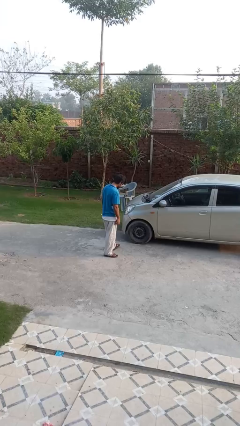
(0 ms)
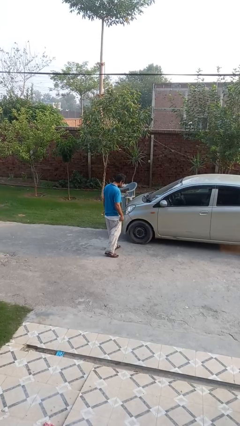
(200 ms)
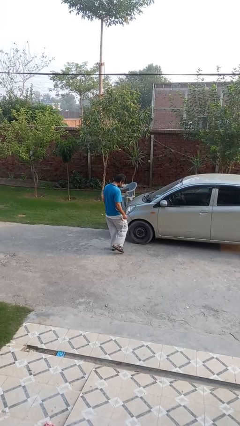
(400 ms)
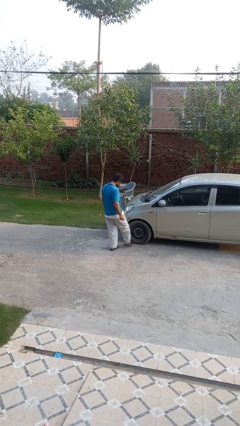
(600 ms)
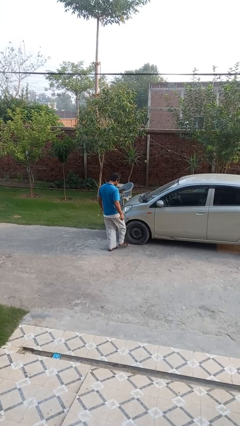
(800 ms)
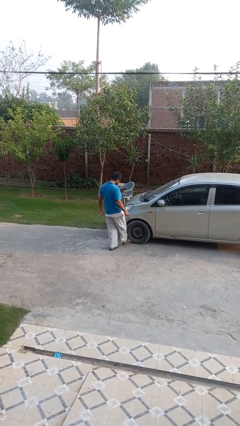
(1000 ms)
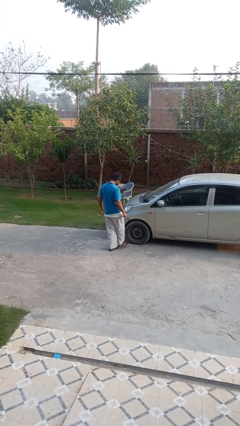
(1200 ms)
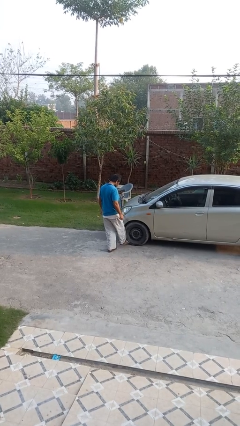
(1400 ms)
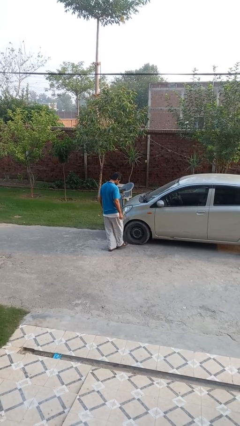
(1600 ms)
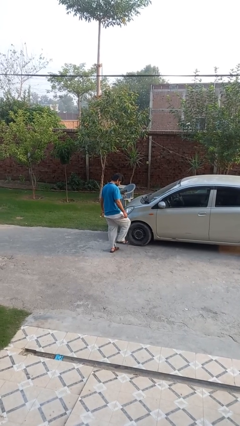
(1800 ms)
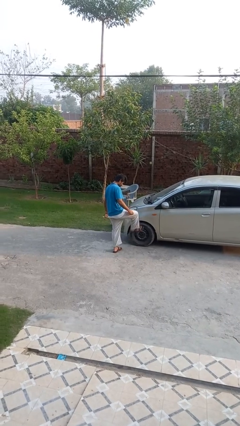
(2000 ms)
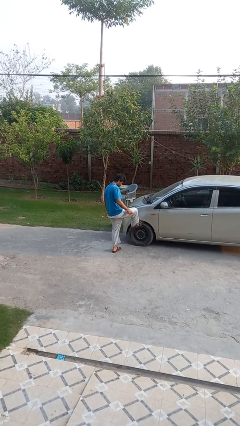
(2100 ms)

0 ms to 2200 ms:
person kicks car tires

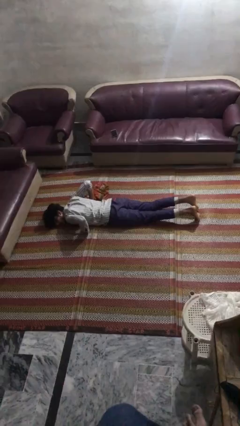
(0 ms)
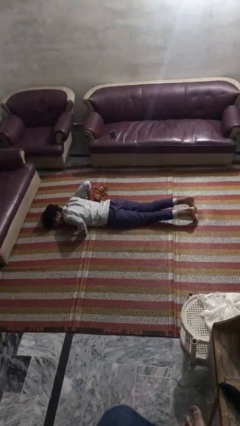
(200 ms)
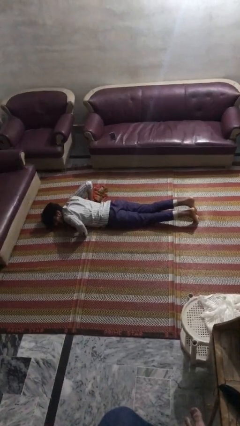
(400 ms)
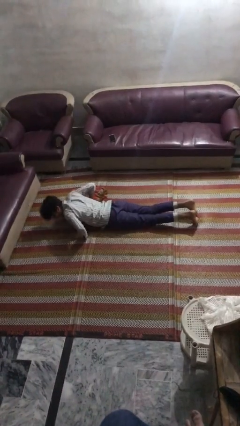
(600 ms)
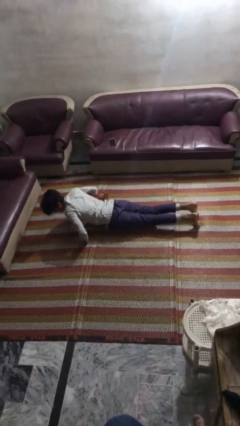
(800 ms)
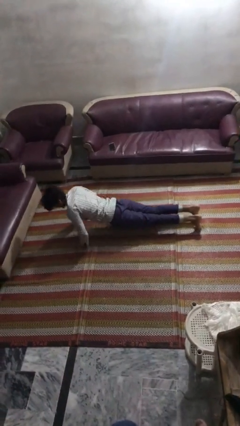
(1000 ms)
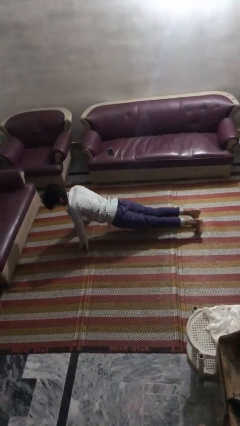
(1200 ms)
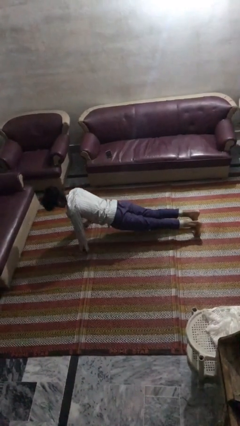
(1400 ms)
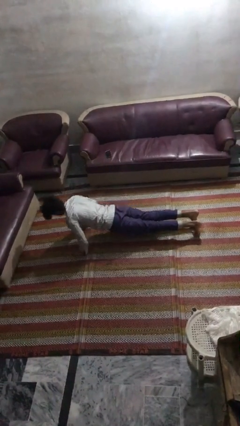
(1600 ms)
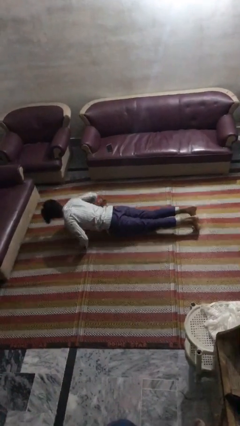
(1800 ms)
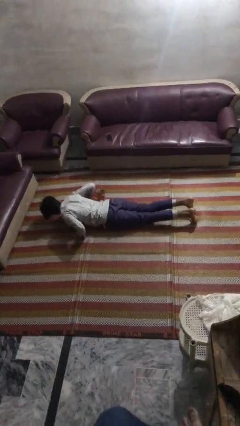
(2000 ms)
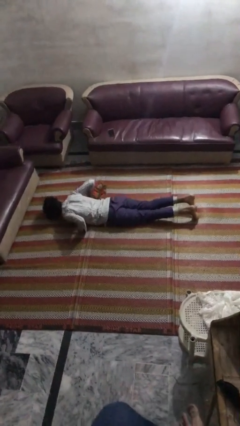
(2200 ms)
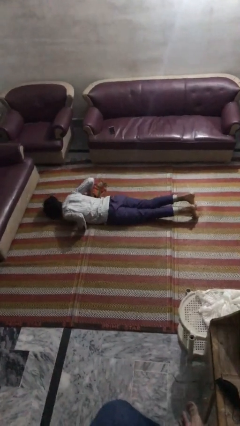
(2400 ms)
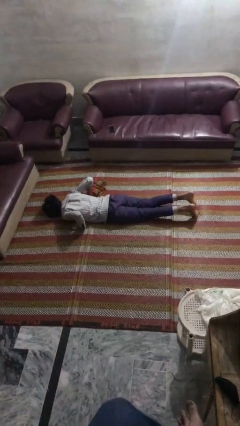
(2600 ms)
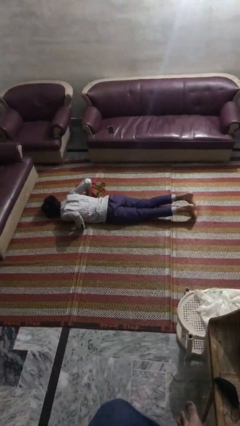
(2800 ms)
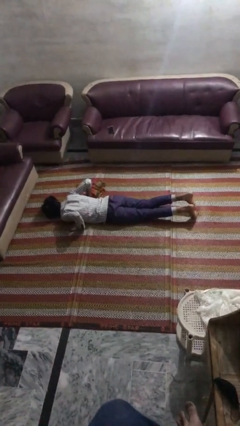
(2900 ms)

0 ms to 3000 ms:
person exercises with pushup

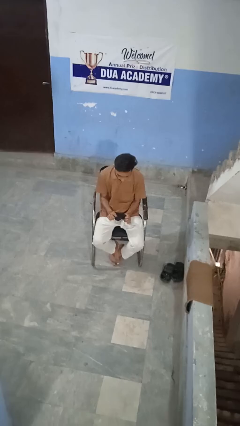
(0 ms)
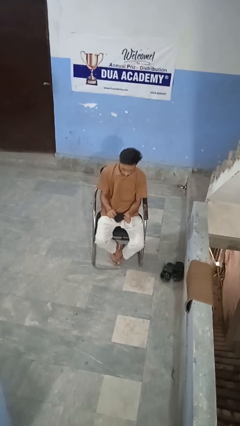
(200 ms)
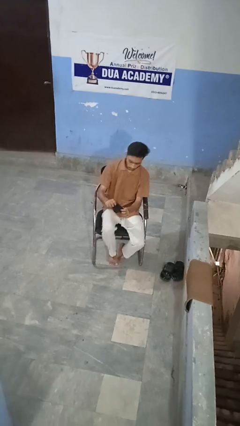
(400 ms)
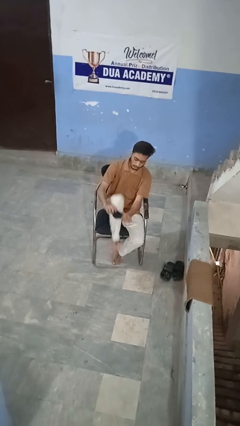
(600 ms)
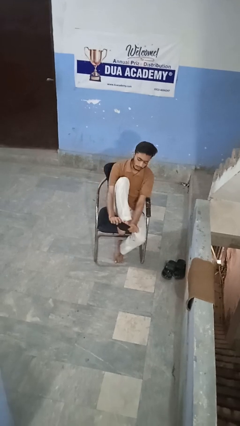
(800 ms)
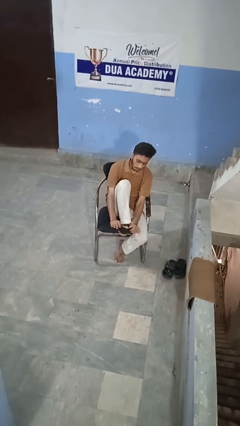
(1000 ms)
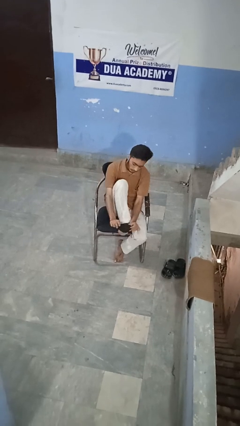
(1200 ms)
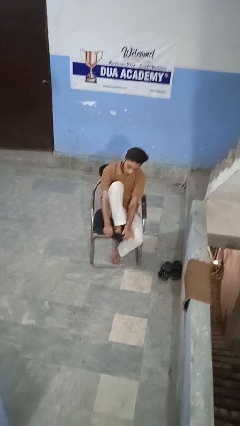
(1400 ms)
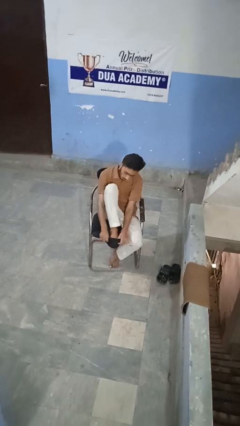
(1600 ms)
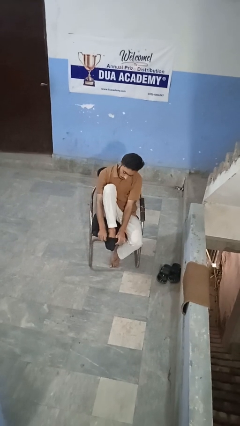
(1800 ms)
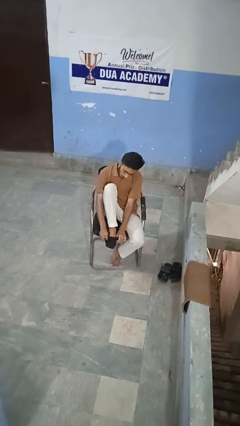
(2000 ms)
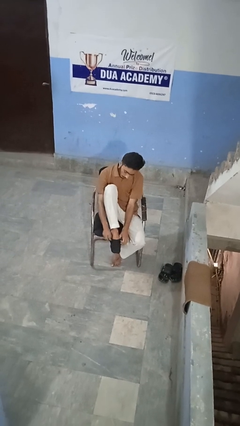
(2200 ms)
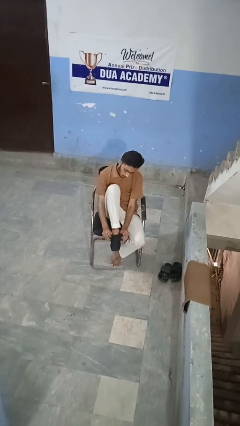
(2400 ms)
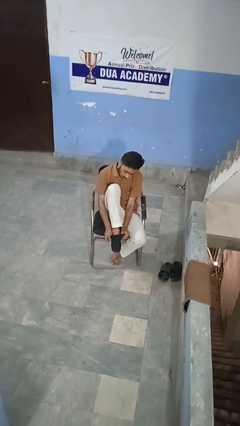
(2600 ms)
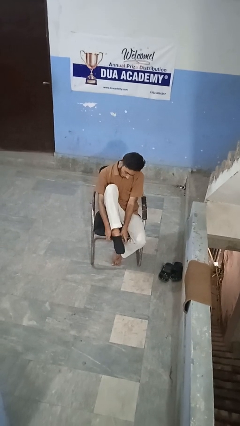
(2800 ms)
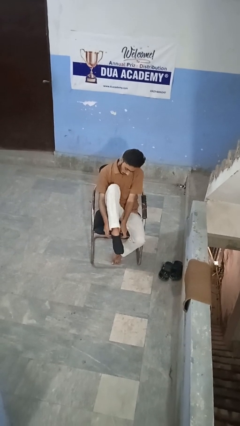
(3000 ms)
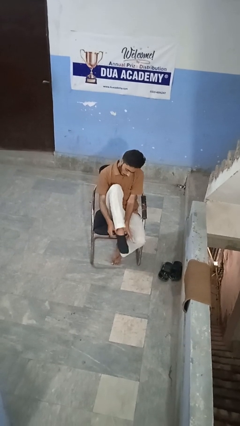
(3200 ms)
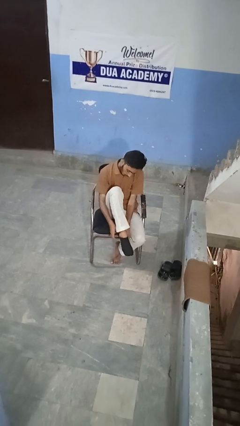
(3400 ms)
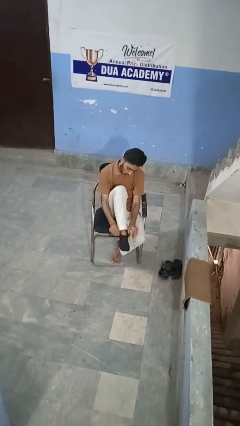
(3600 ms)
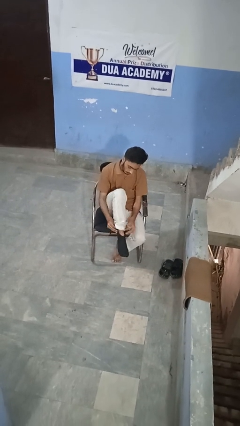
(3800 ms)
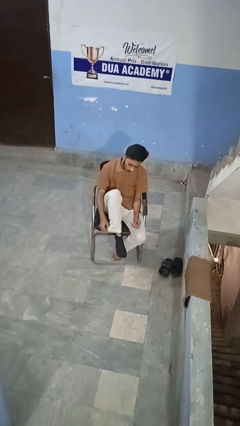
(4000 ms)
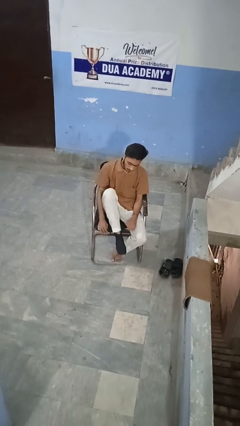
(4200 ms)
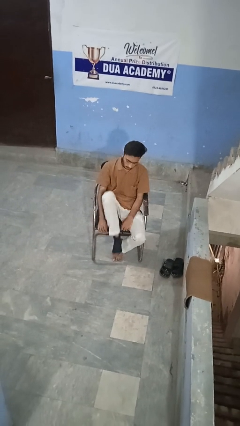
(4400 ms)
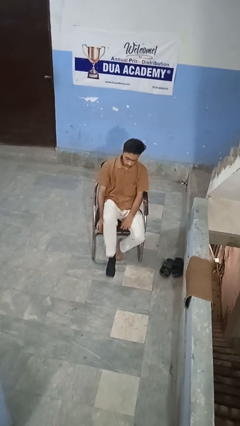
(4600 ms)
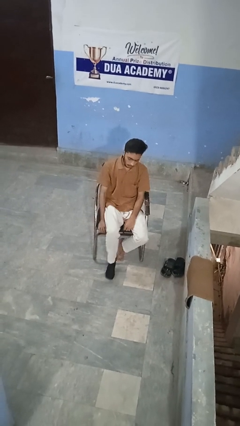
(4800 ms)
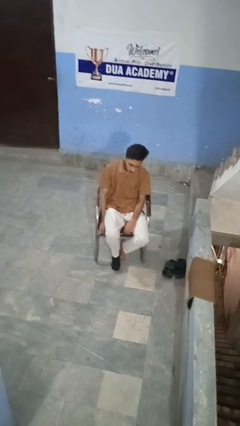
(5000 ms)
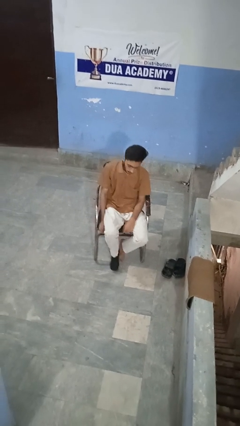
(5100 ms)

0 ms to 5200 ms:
person puts on socks

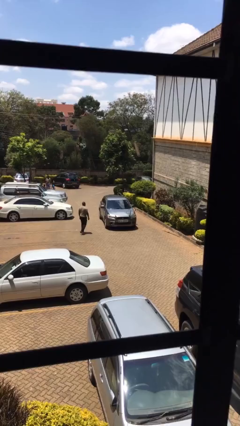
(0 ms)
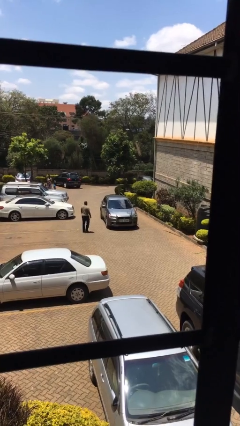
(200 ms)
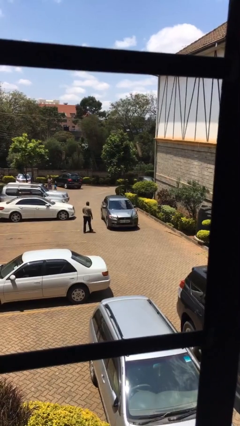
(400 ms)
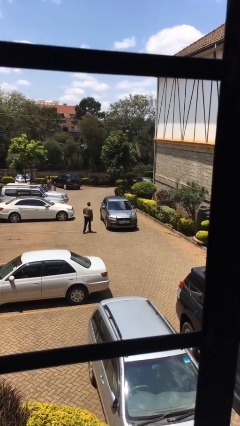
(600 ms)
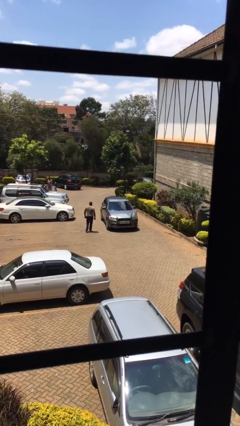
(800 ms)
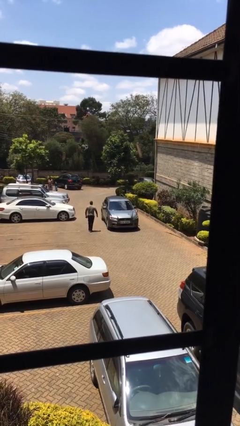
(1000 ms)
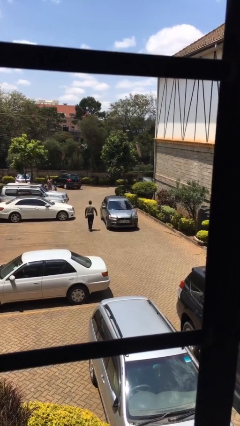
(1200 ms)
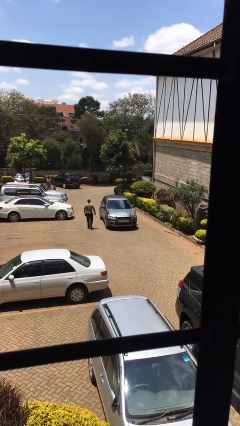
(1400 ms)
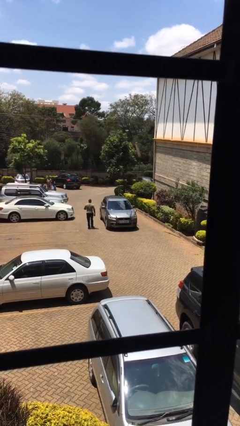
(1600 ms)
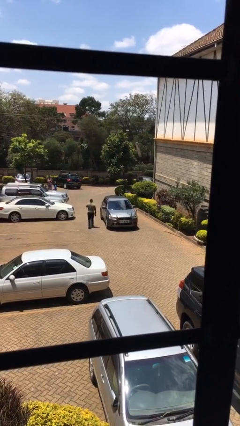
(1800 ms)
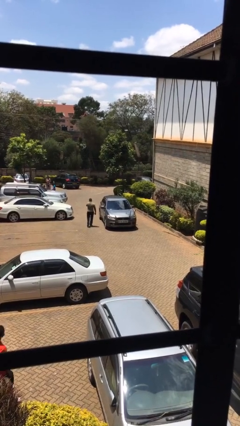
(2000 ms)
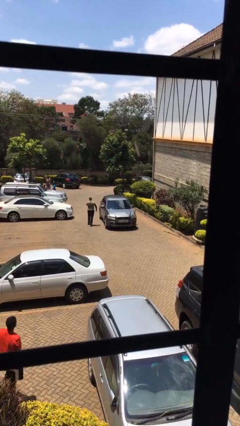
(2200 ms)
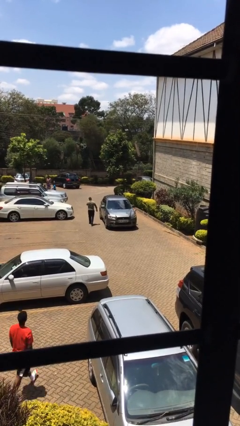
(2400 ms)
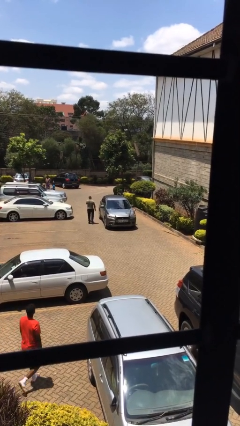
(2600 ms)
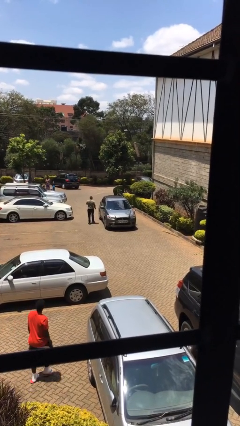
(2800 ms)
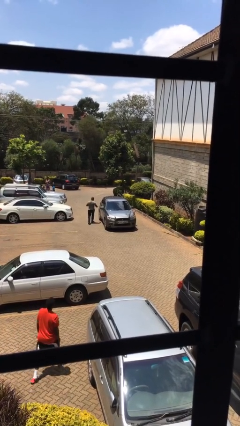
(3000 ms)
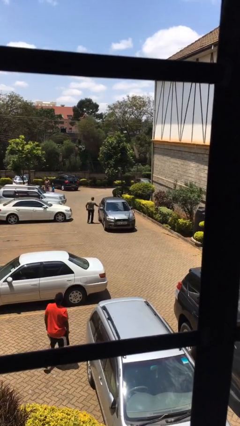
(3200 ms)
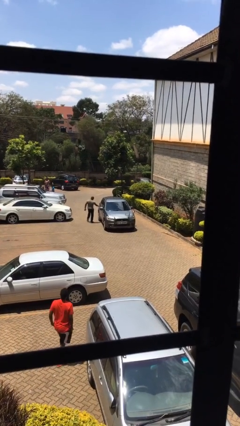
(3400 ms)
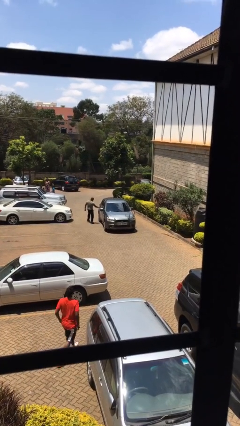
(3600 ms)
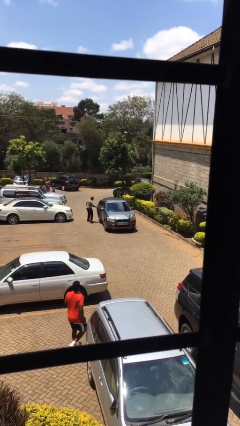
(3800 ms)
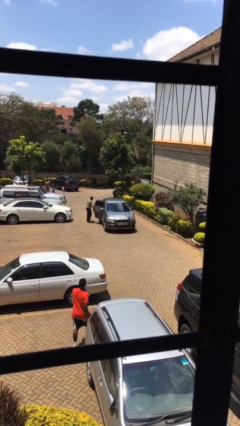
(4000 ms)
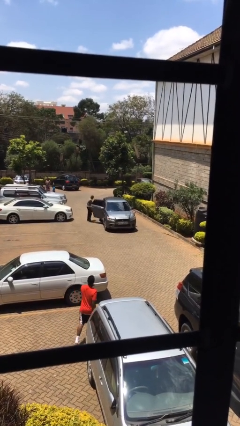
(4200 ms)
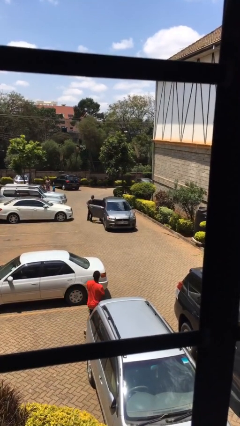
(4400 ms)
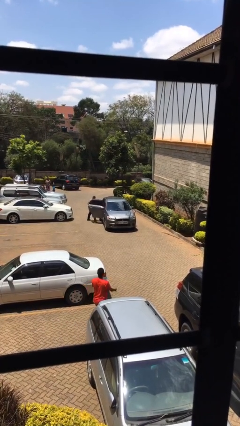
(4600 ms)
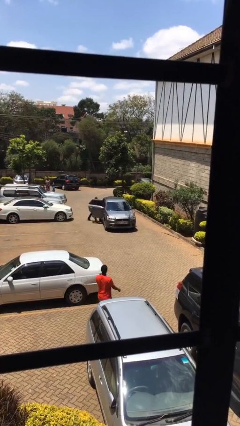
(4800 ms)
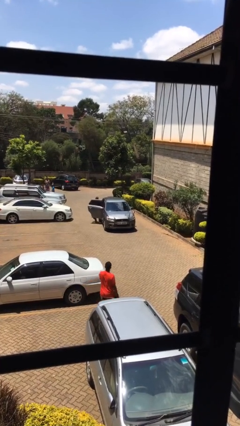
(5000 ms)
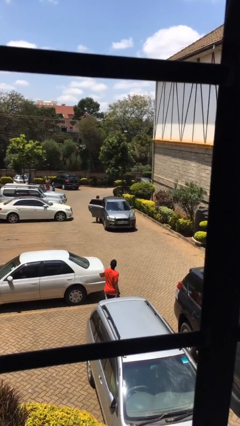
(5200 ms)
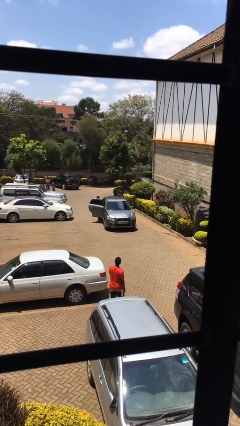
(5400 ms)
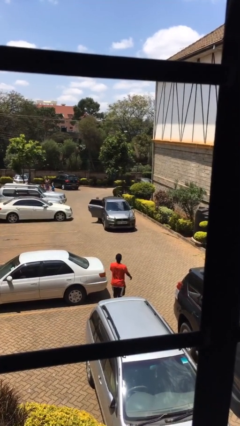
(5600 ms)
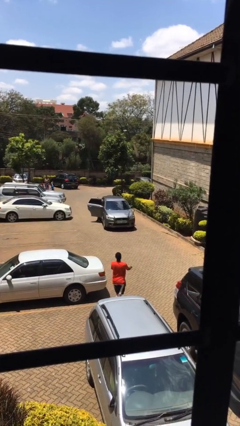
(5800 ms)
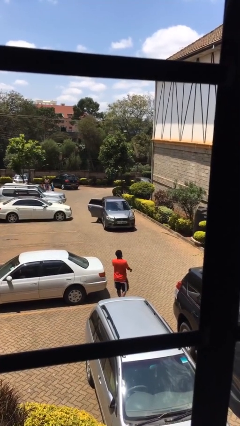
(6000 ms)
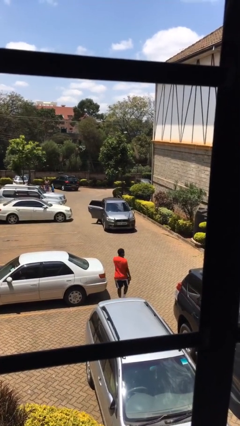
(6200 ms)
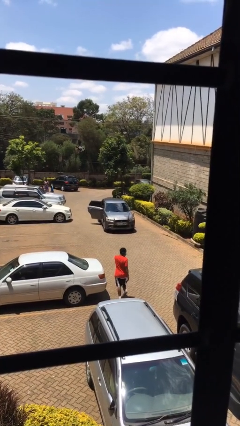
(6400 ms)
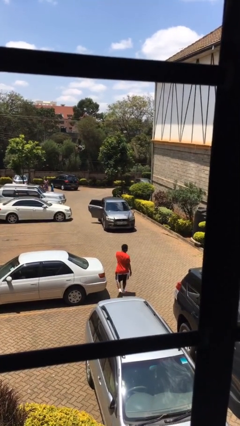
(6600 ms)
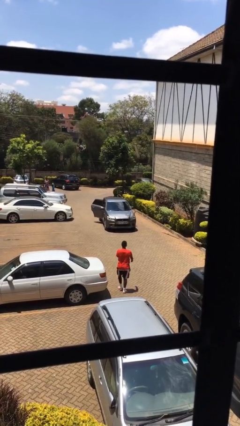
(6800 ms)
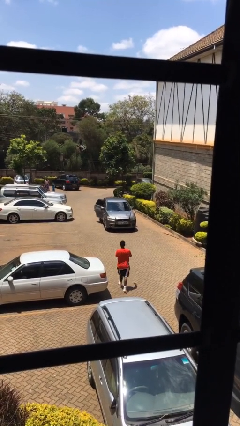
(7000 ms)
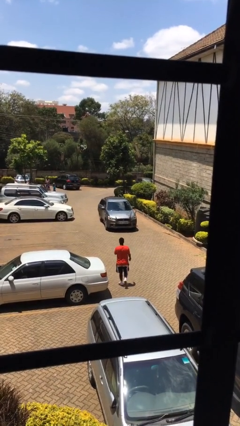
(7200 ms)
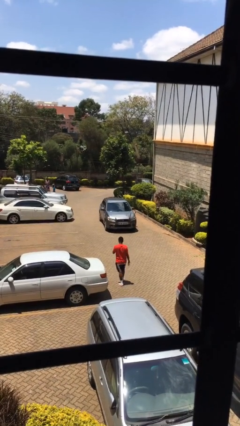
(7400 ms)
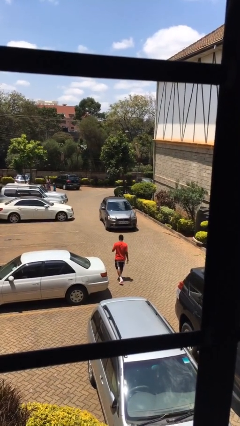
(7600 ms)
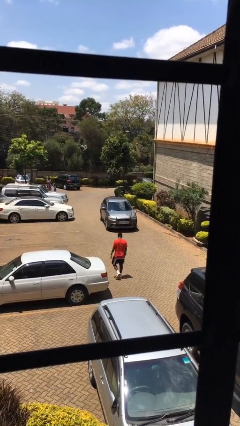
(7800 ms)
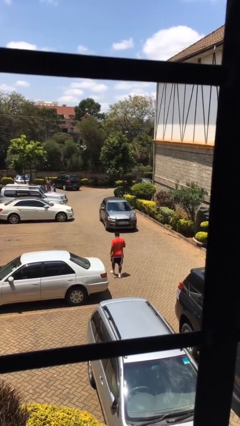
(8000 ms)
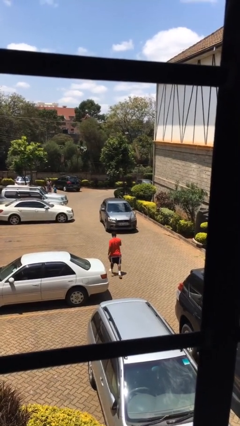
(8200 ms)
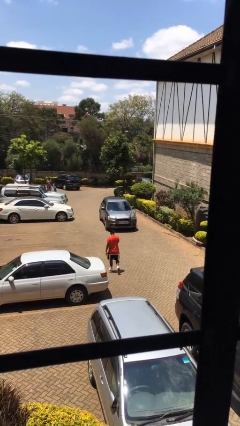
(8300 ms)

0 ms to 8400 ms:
car picks up person
